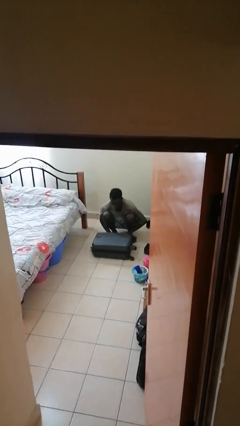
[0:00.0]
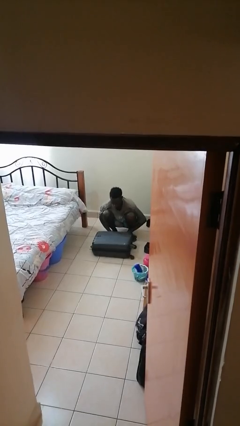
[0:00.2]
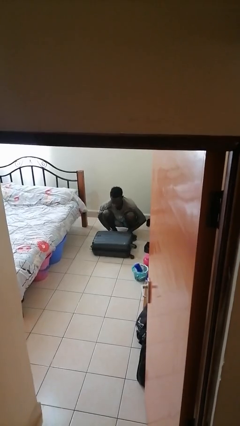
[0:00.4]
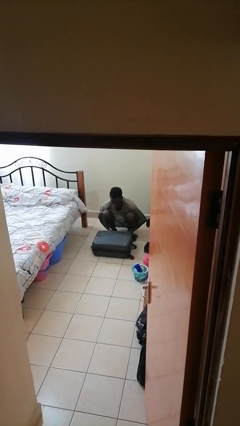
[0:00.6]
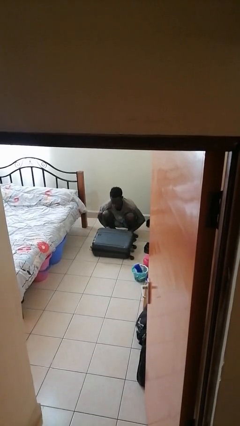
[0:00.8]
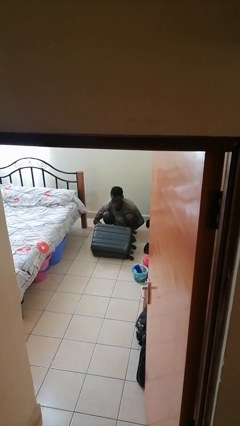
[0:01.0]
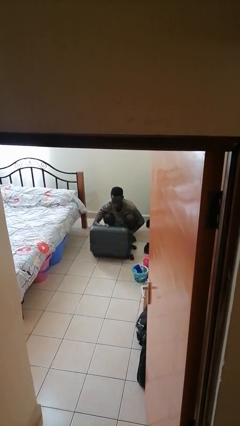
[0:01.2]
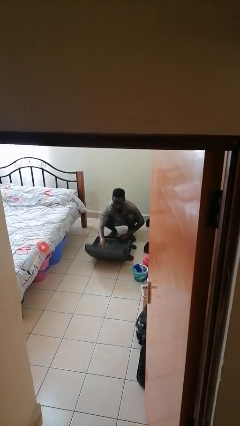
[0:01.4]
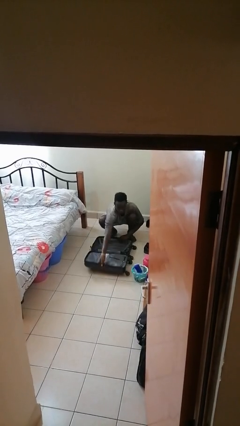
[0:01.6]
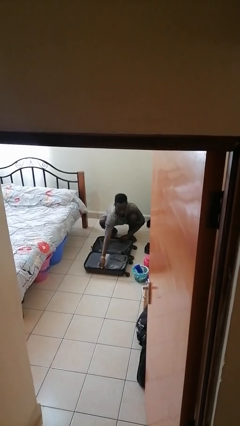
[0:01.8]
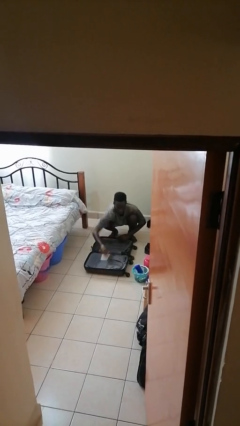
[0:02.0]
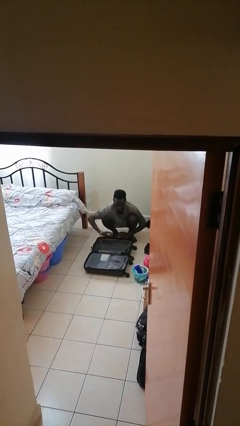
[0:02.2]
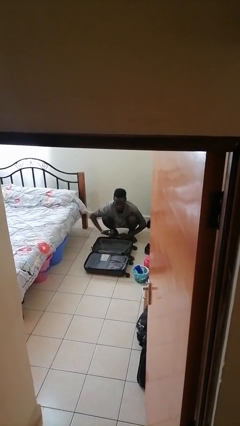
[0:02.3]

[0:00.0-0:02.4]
person opens suitcase

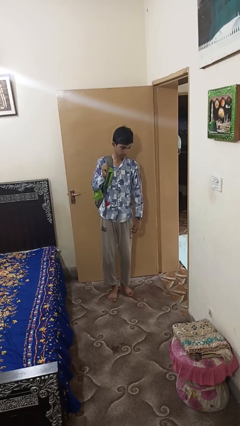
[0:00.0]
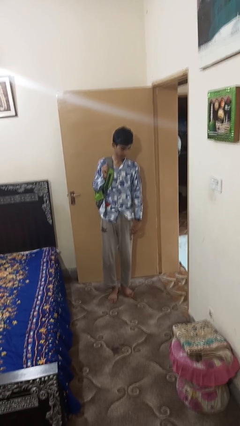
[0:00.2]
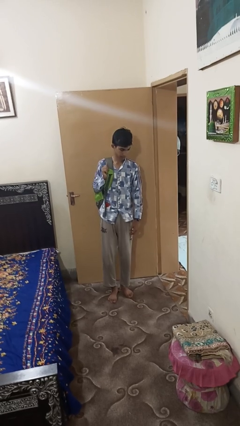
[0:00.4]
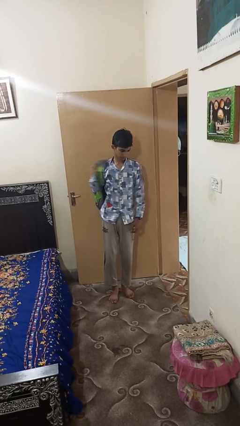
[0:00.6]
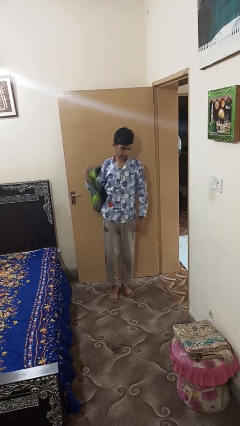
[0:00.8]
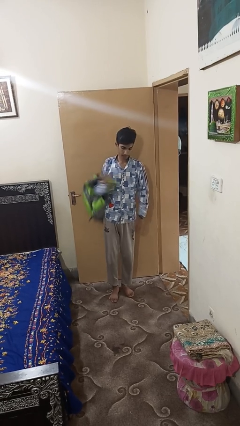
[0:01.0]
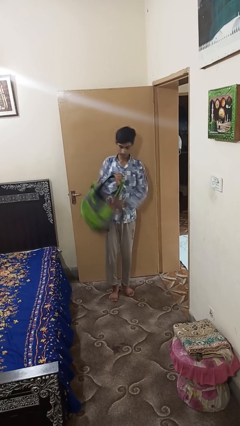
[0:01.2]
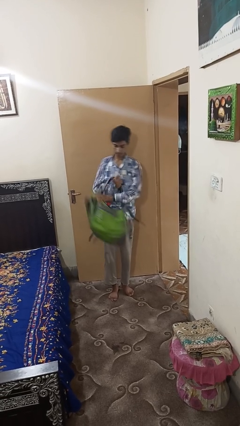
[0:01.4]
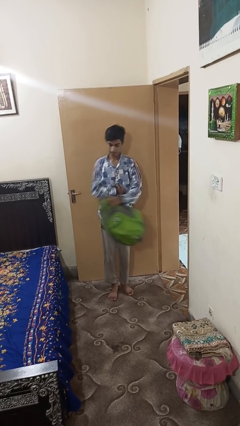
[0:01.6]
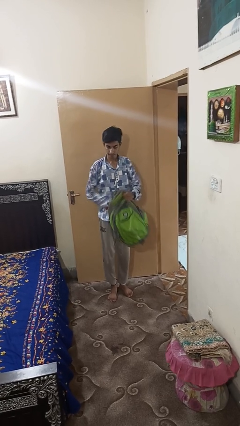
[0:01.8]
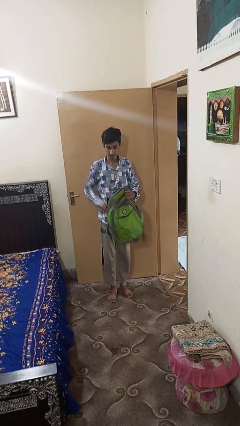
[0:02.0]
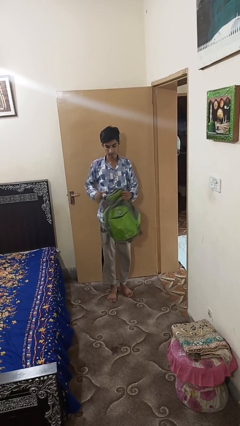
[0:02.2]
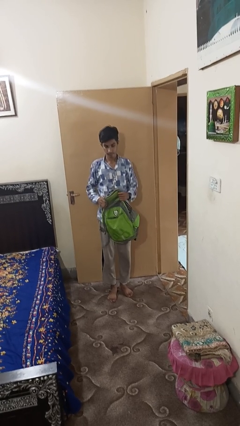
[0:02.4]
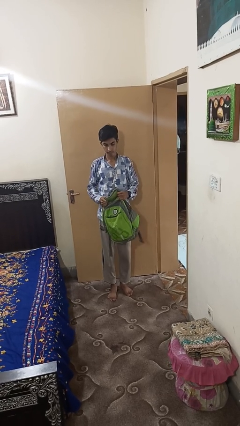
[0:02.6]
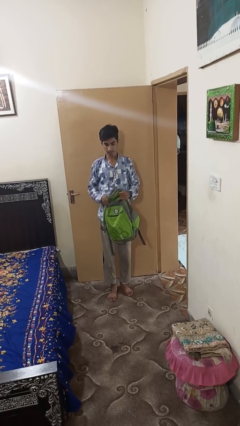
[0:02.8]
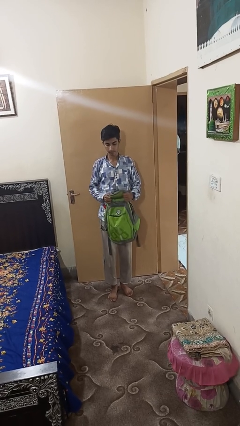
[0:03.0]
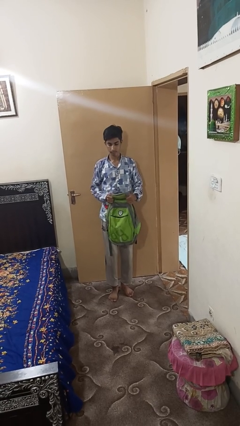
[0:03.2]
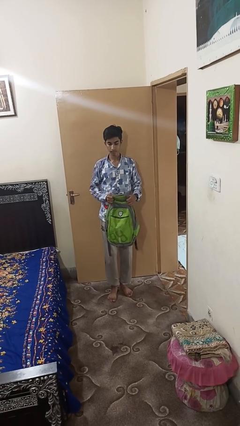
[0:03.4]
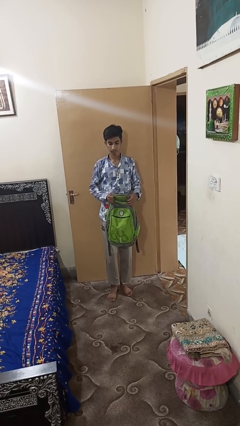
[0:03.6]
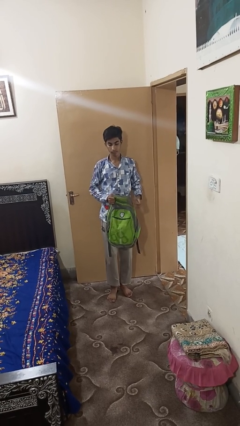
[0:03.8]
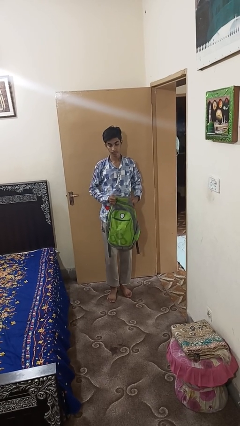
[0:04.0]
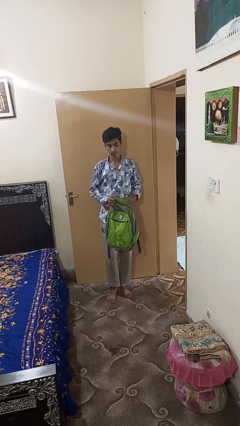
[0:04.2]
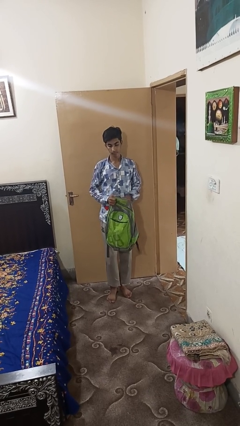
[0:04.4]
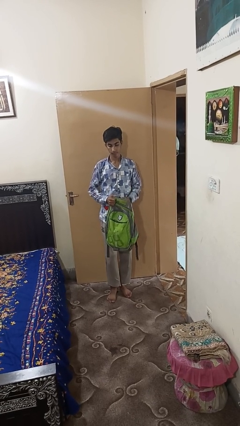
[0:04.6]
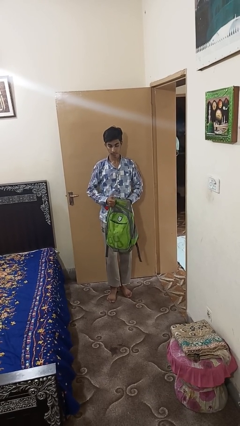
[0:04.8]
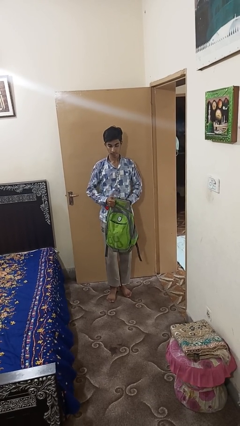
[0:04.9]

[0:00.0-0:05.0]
person takes off backpack

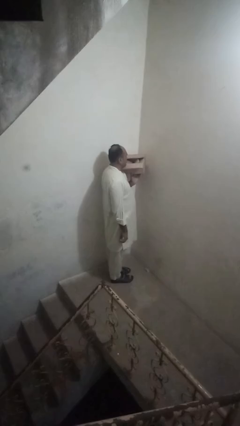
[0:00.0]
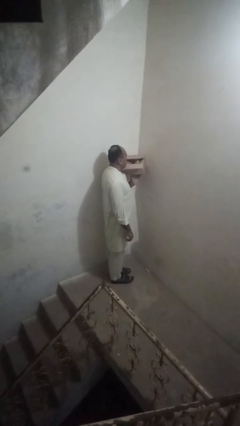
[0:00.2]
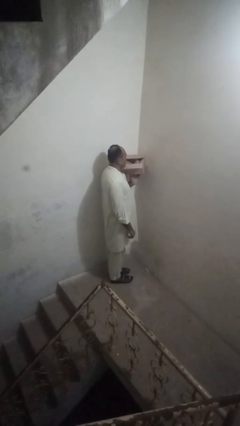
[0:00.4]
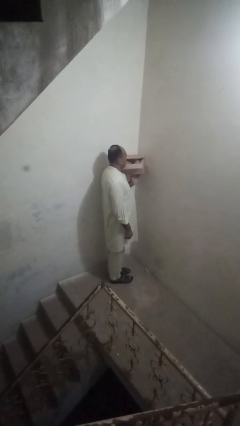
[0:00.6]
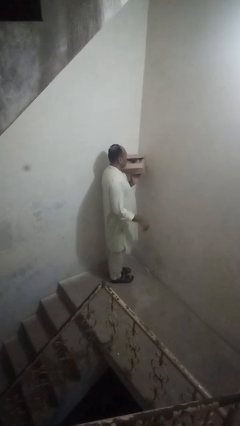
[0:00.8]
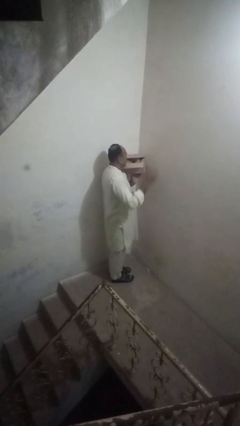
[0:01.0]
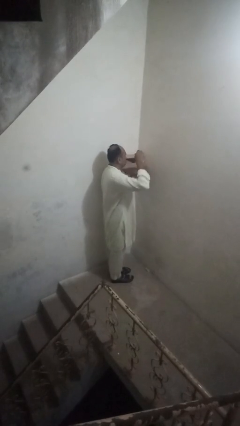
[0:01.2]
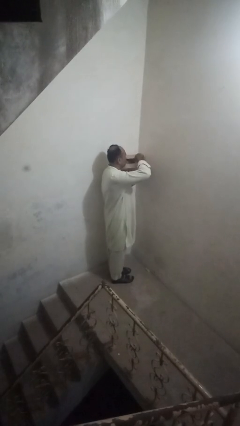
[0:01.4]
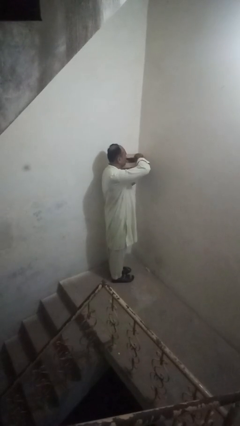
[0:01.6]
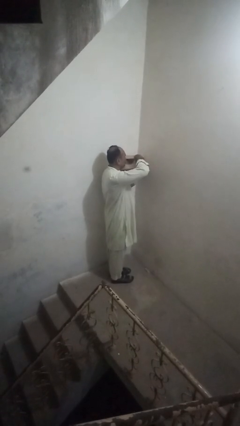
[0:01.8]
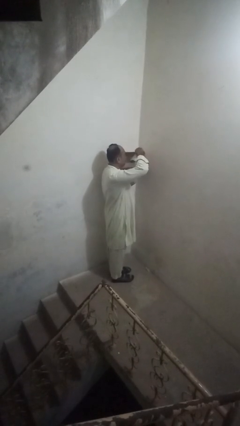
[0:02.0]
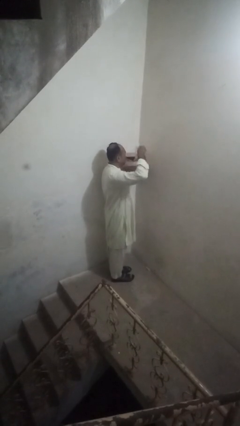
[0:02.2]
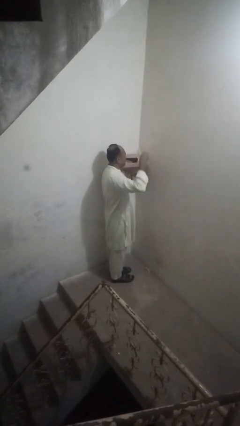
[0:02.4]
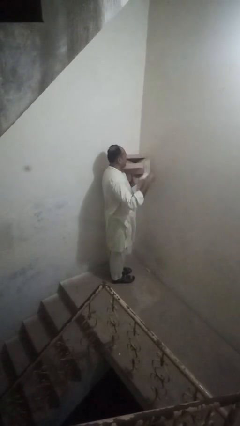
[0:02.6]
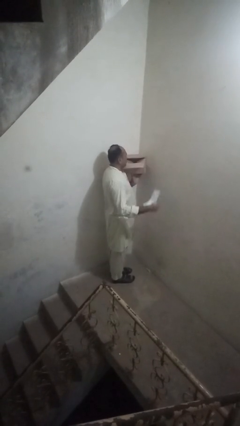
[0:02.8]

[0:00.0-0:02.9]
person takes letters from mailbox

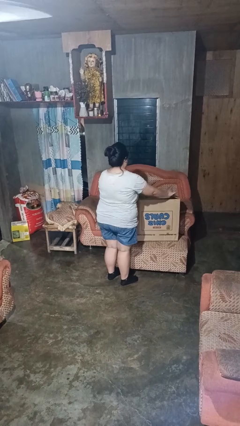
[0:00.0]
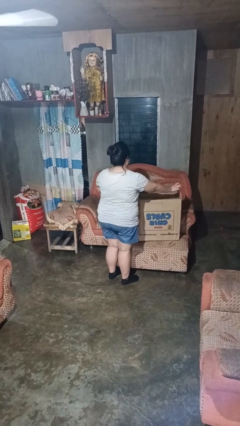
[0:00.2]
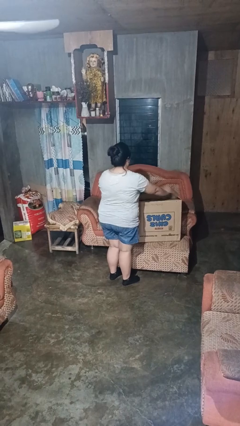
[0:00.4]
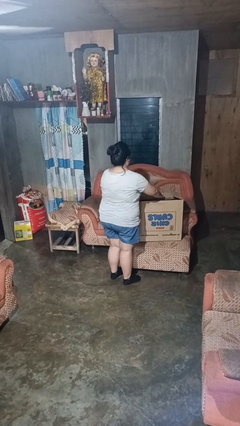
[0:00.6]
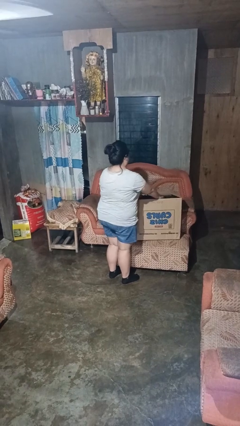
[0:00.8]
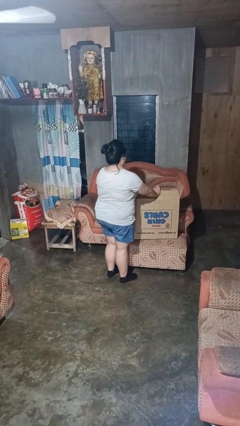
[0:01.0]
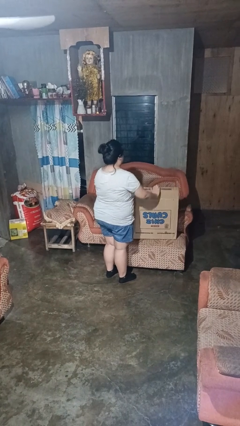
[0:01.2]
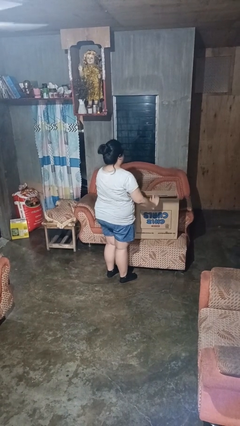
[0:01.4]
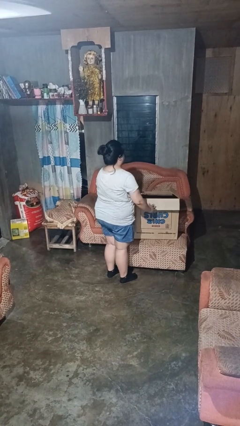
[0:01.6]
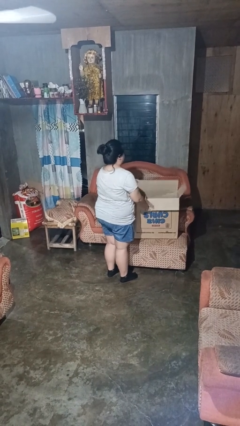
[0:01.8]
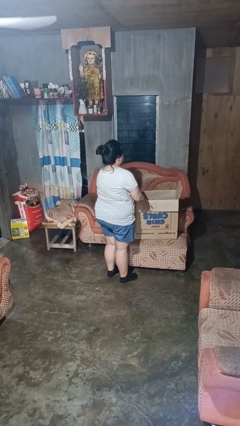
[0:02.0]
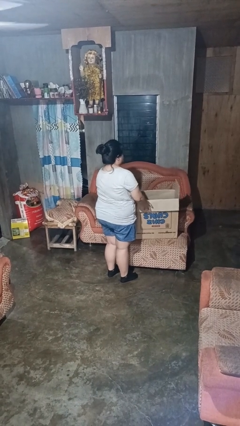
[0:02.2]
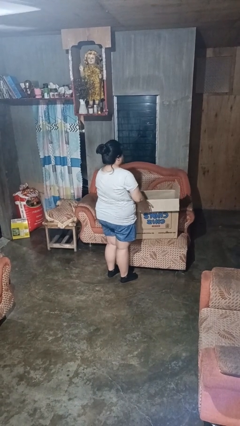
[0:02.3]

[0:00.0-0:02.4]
person opens box

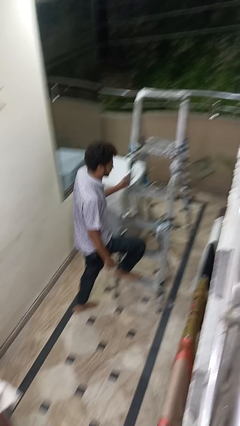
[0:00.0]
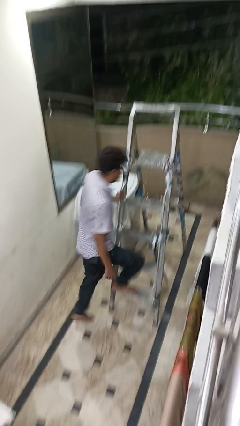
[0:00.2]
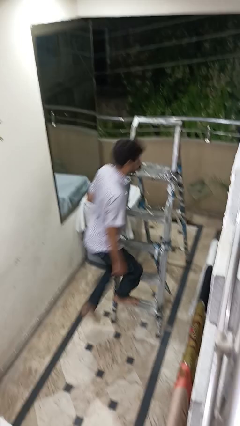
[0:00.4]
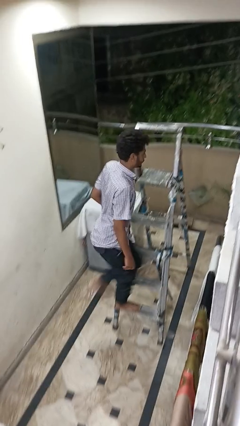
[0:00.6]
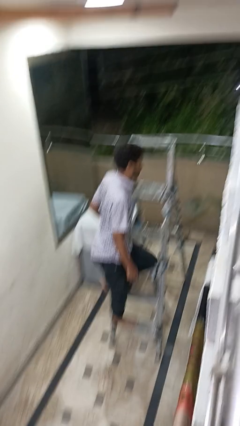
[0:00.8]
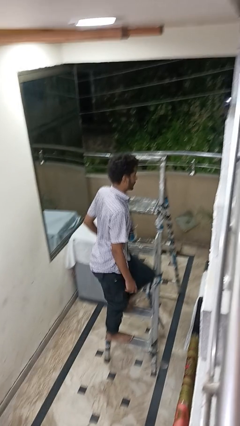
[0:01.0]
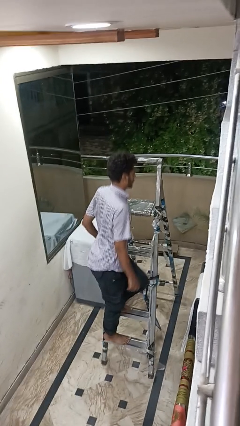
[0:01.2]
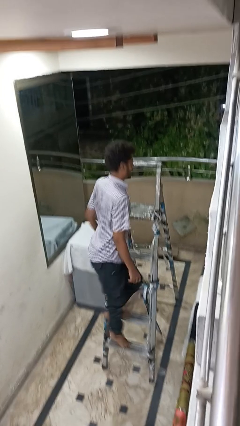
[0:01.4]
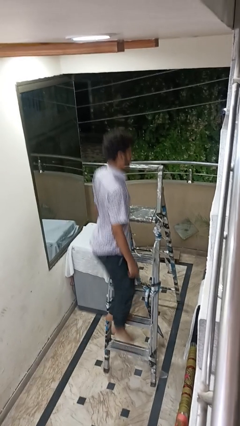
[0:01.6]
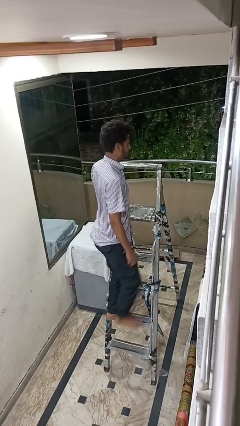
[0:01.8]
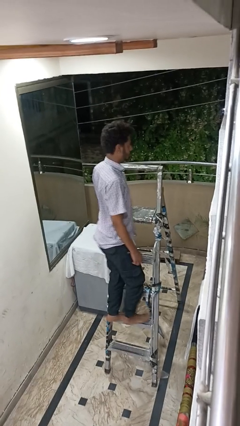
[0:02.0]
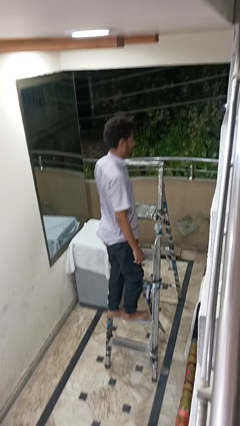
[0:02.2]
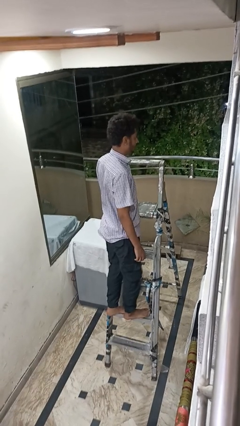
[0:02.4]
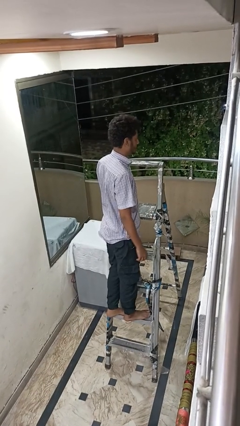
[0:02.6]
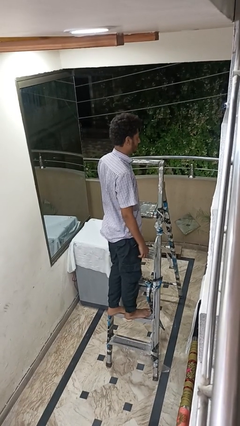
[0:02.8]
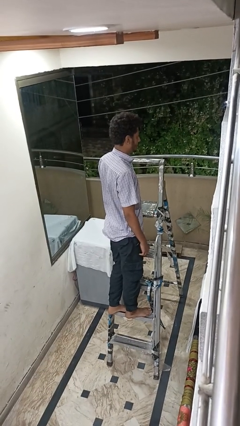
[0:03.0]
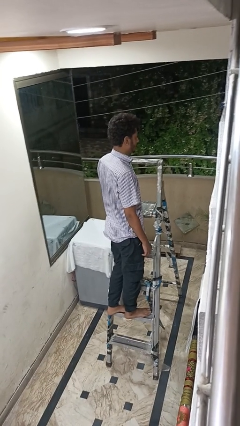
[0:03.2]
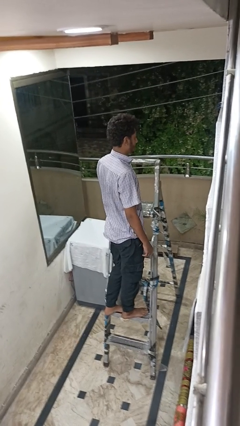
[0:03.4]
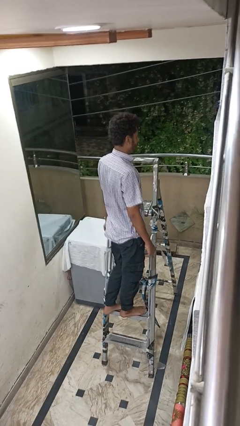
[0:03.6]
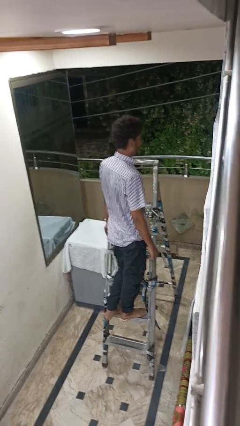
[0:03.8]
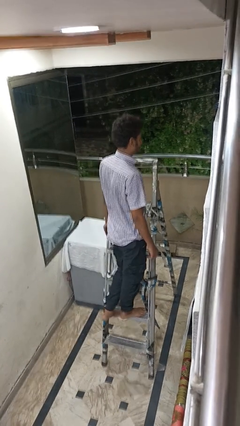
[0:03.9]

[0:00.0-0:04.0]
person climbs up ladder

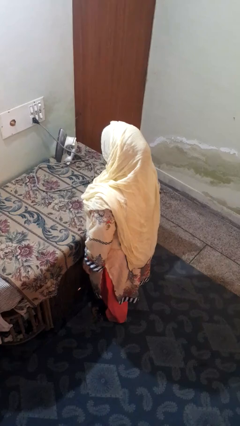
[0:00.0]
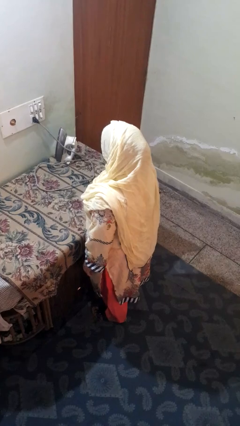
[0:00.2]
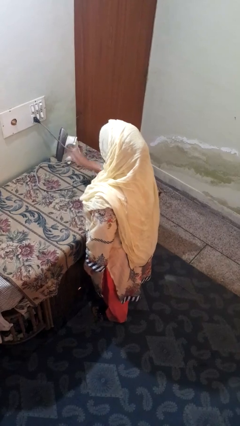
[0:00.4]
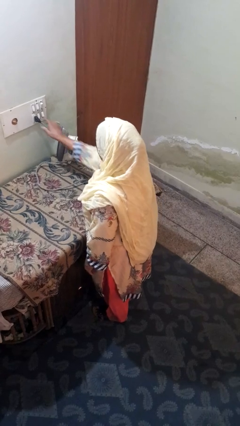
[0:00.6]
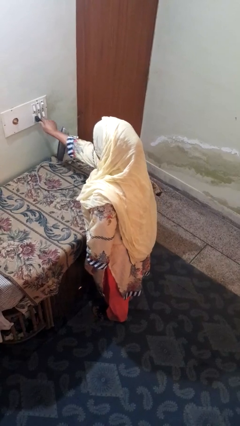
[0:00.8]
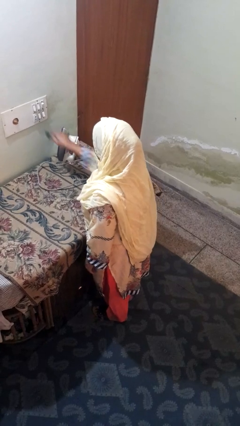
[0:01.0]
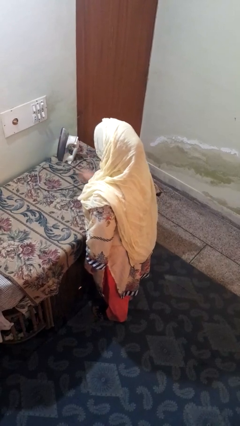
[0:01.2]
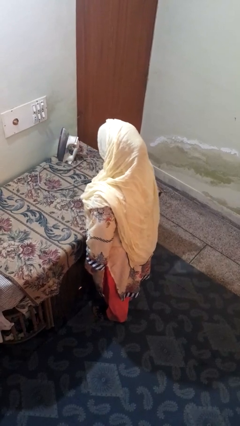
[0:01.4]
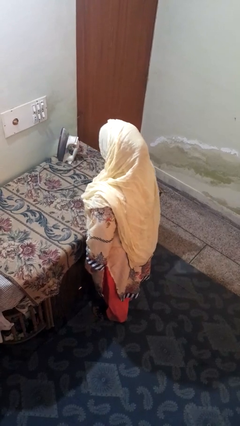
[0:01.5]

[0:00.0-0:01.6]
person unplugs from electrical socket
